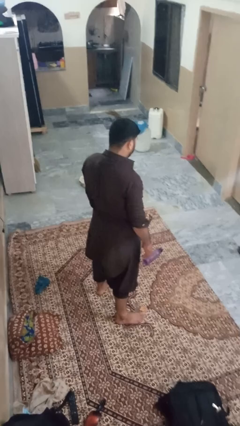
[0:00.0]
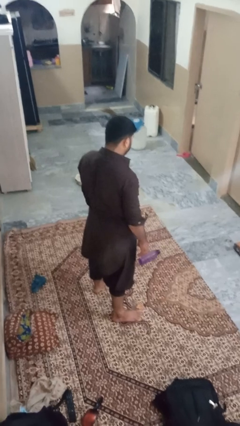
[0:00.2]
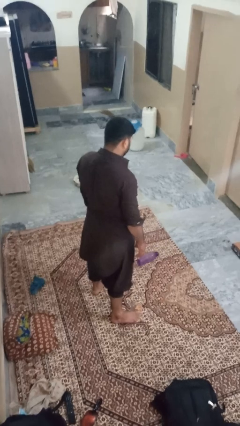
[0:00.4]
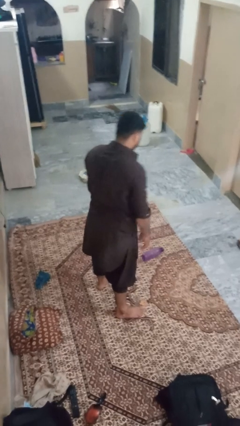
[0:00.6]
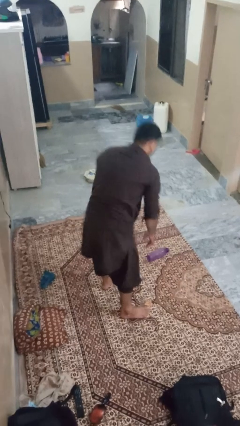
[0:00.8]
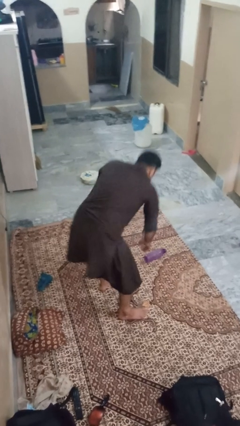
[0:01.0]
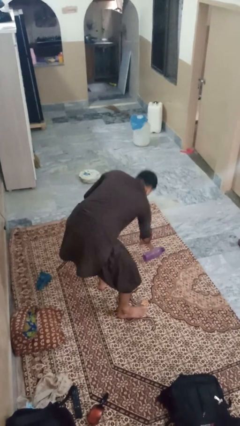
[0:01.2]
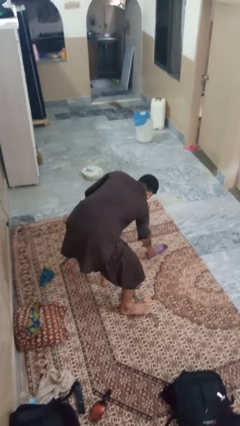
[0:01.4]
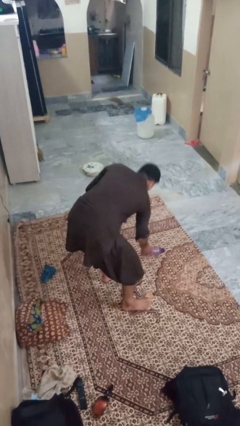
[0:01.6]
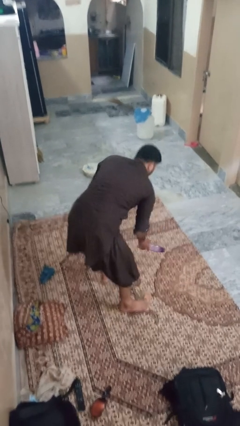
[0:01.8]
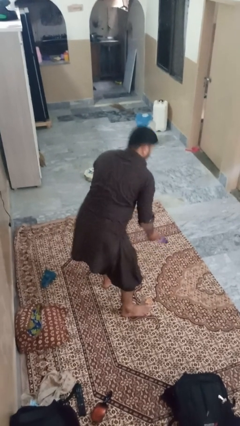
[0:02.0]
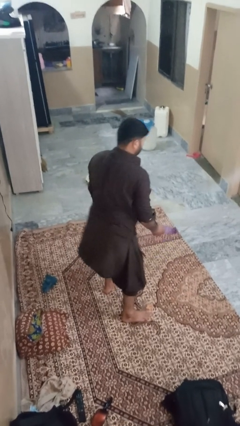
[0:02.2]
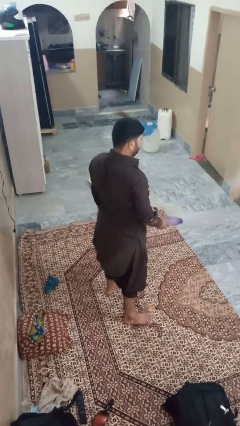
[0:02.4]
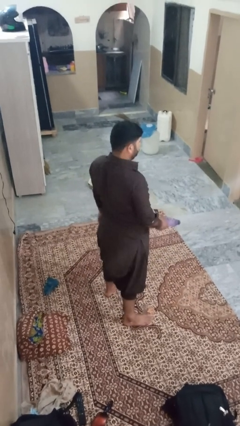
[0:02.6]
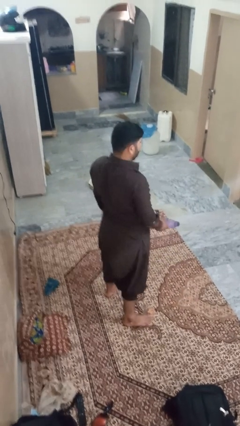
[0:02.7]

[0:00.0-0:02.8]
person picks up object from floor

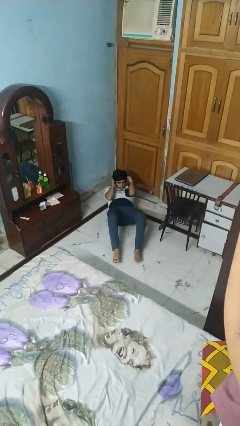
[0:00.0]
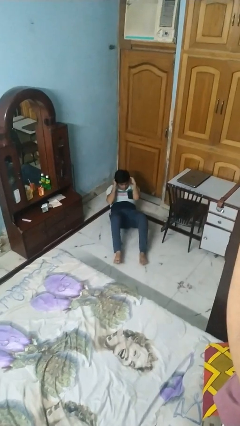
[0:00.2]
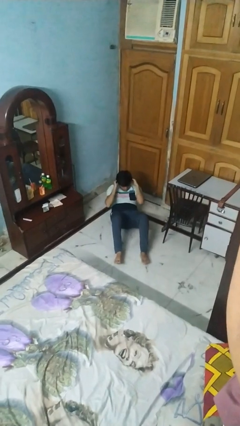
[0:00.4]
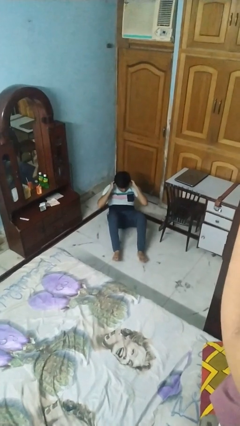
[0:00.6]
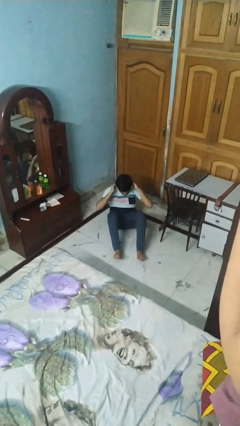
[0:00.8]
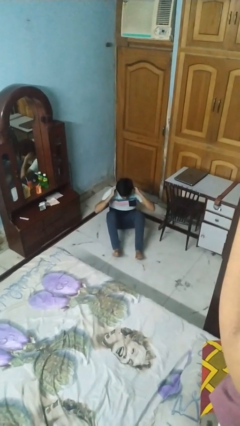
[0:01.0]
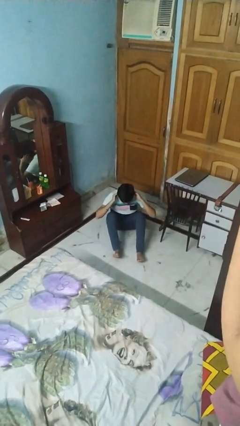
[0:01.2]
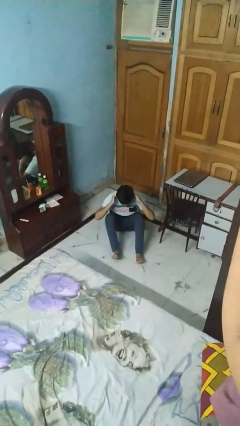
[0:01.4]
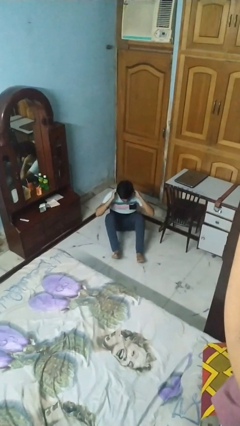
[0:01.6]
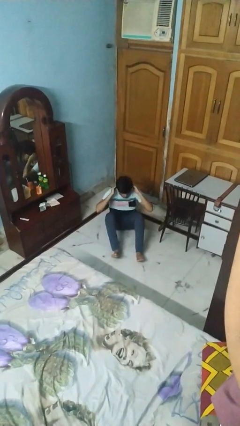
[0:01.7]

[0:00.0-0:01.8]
person exercises with situp

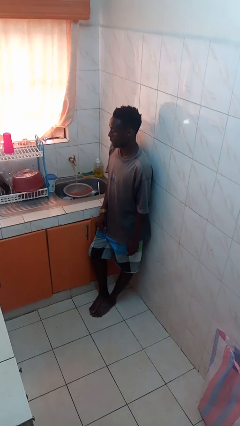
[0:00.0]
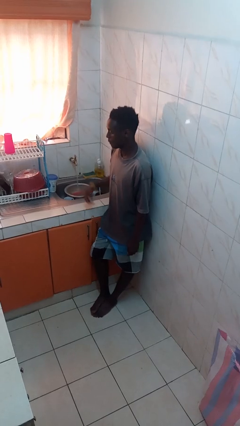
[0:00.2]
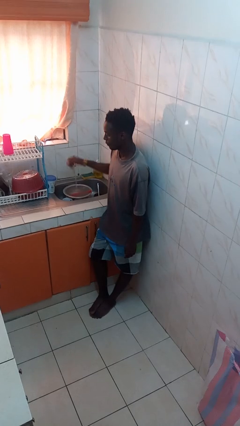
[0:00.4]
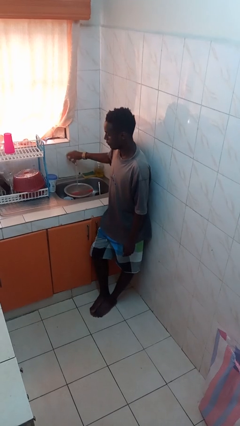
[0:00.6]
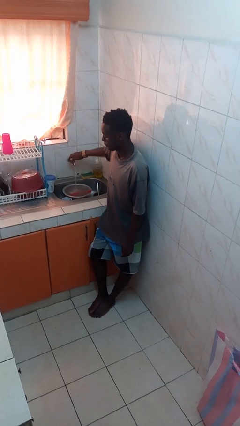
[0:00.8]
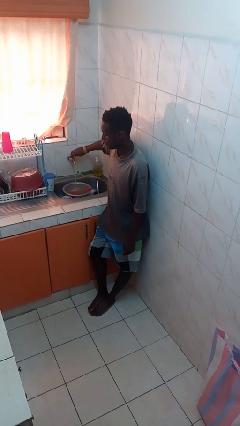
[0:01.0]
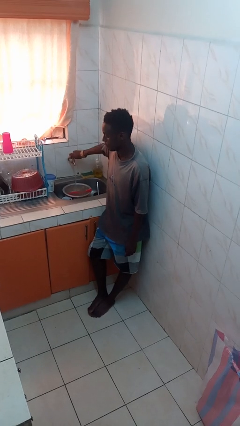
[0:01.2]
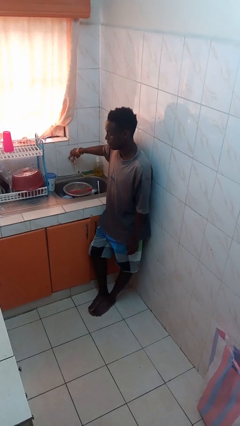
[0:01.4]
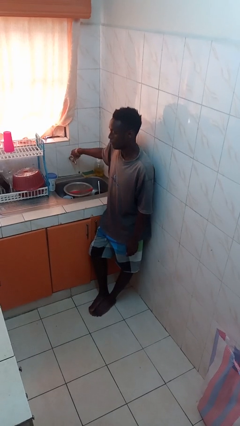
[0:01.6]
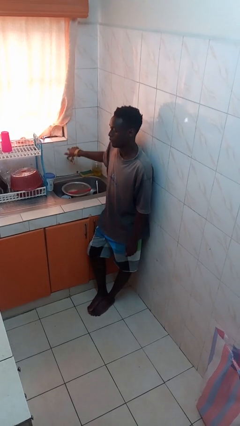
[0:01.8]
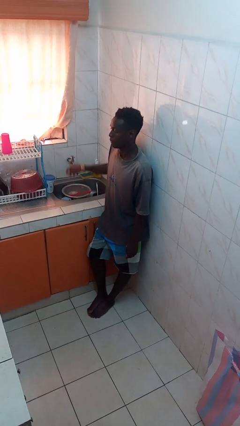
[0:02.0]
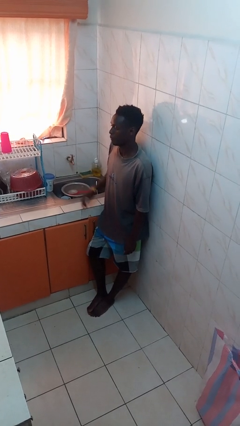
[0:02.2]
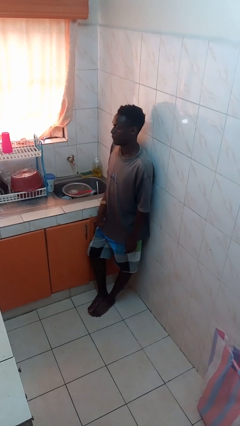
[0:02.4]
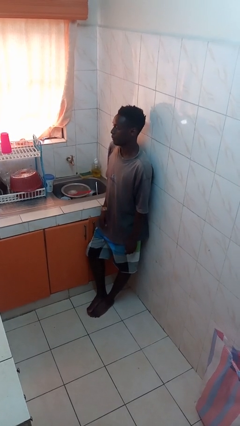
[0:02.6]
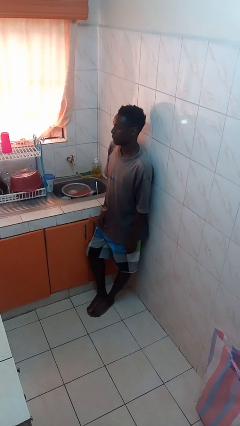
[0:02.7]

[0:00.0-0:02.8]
person turns off faucet

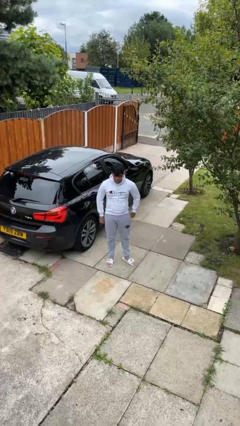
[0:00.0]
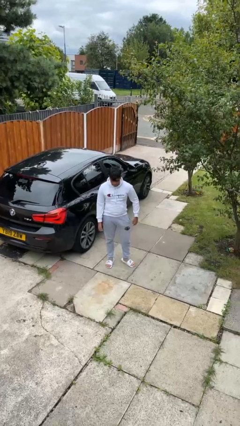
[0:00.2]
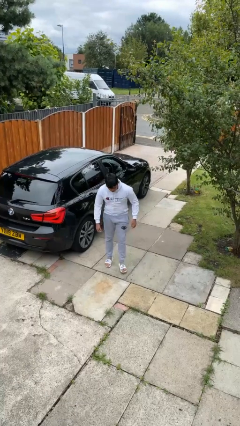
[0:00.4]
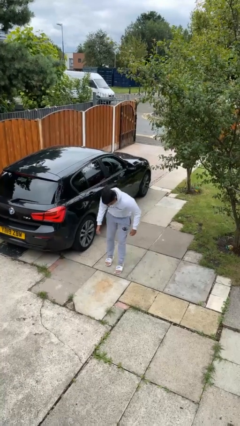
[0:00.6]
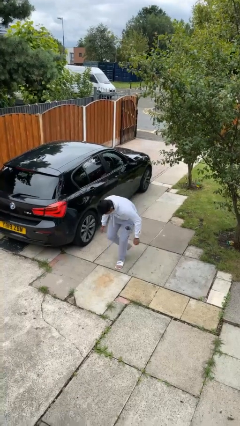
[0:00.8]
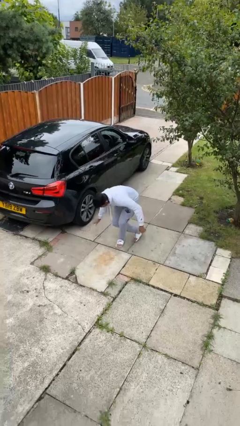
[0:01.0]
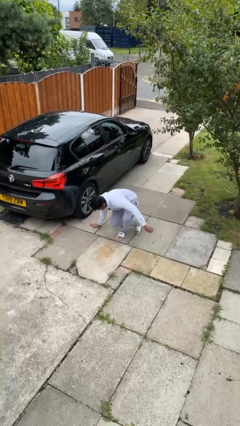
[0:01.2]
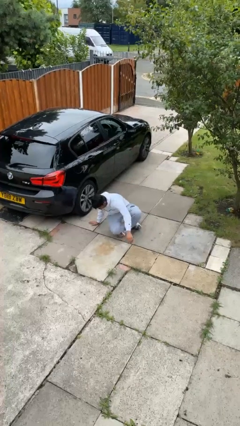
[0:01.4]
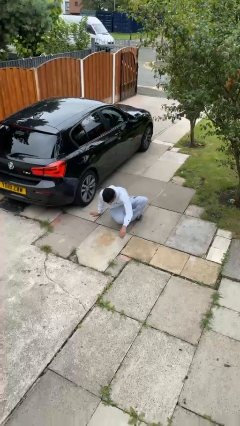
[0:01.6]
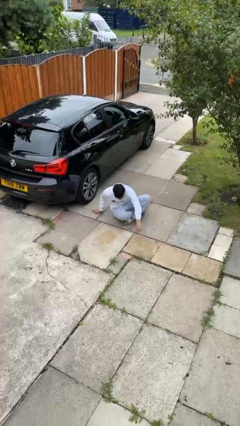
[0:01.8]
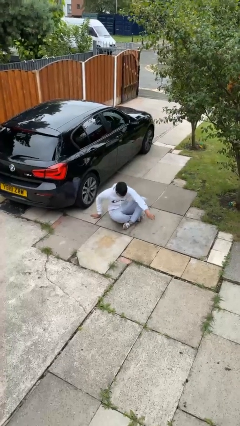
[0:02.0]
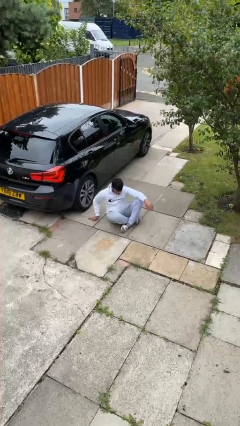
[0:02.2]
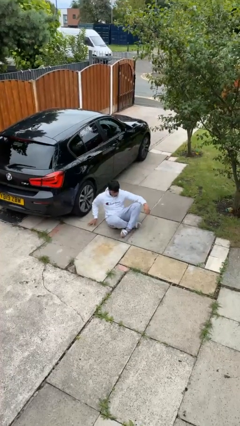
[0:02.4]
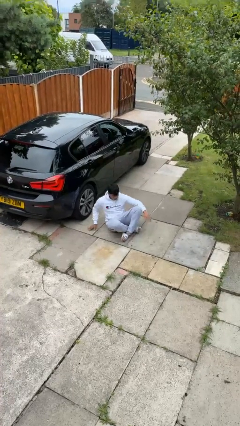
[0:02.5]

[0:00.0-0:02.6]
person sits crisscross

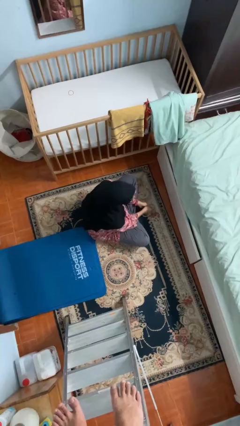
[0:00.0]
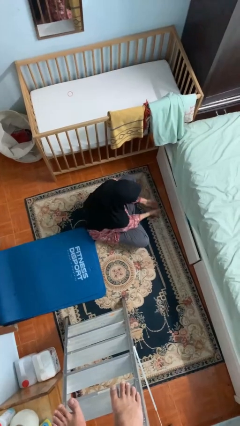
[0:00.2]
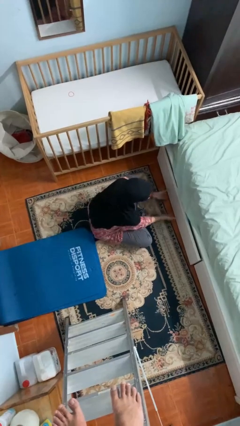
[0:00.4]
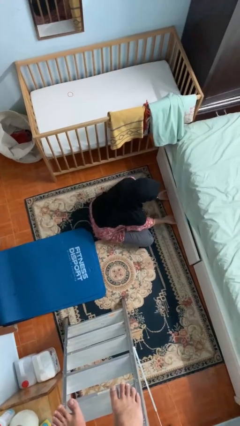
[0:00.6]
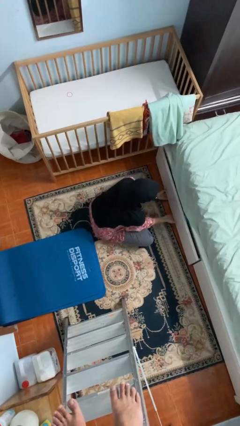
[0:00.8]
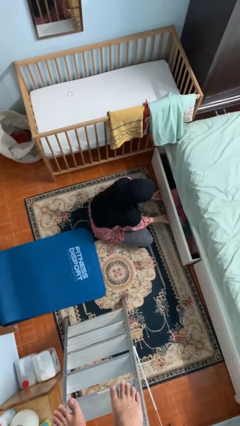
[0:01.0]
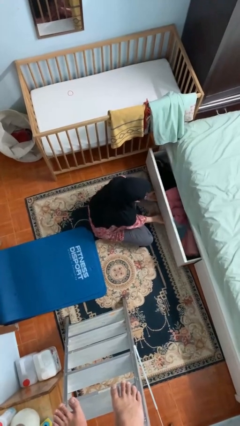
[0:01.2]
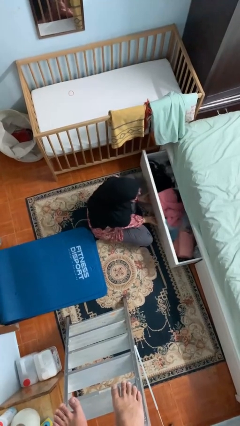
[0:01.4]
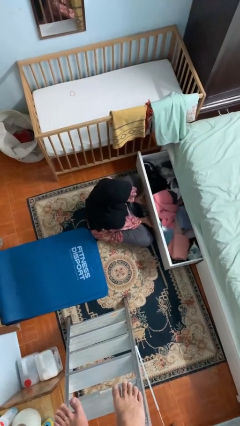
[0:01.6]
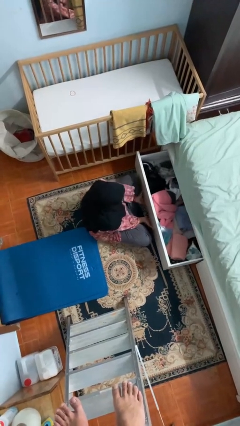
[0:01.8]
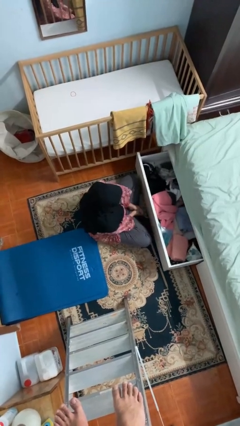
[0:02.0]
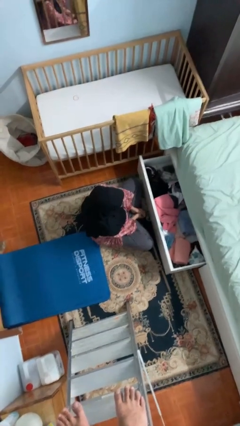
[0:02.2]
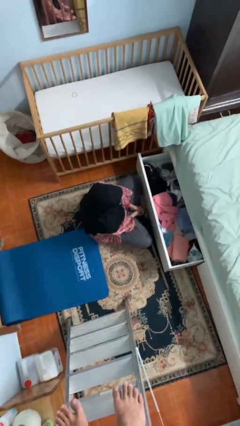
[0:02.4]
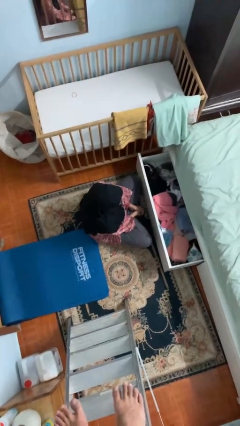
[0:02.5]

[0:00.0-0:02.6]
person opens dresser drawer

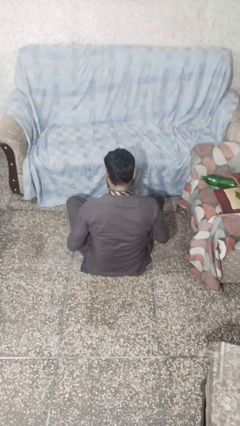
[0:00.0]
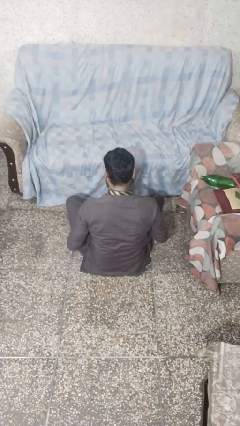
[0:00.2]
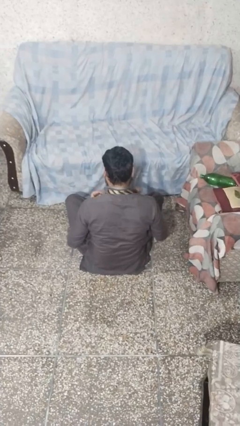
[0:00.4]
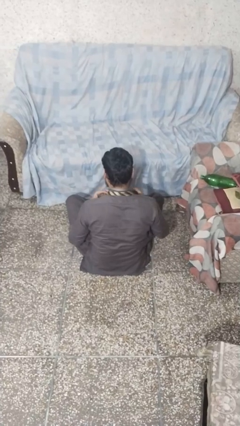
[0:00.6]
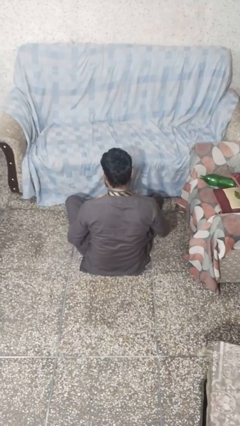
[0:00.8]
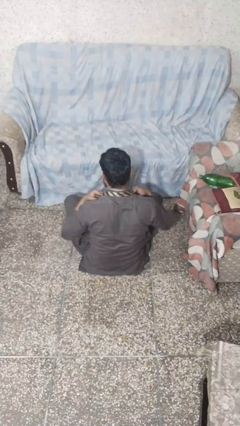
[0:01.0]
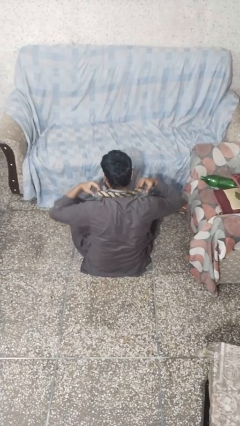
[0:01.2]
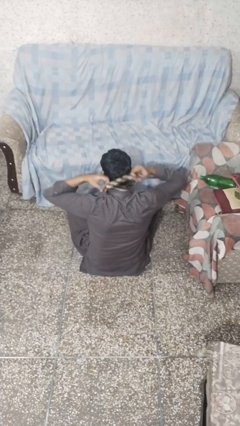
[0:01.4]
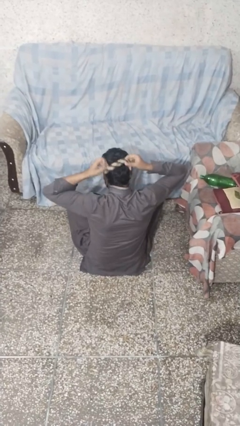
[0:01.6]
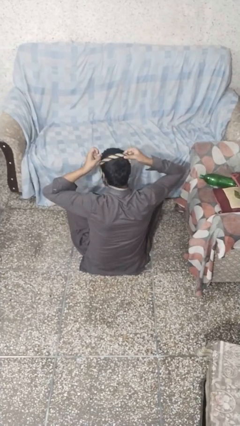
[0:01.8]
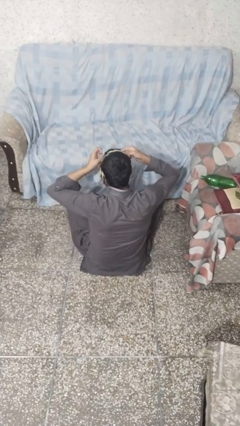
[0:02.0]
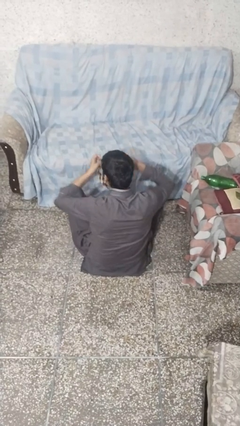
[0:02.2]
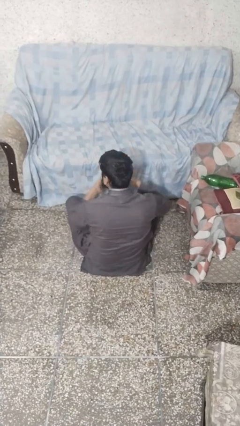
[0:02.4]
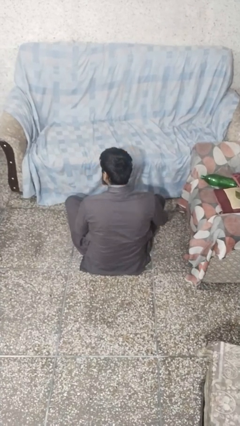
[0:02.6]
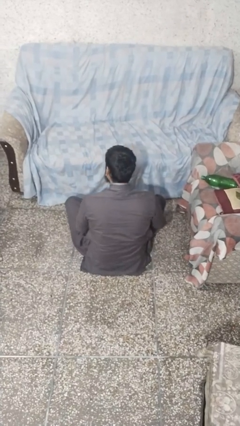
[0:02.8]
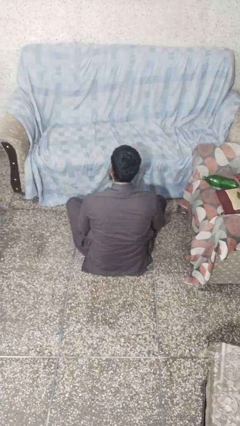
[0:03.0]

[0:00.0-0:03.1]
person takes off necktie

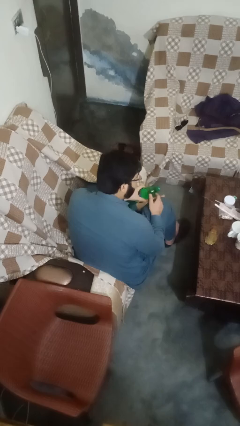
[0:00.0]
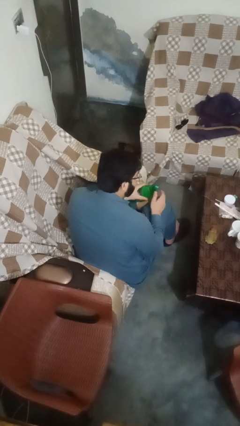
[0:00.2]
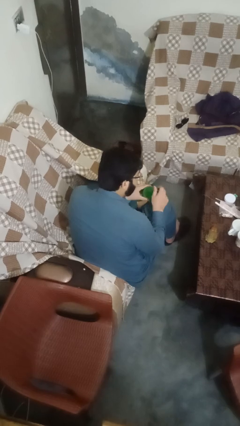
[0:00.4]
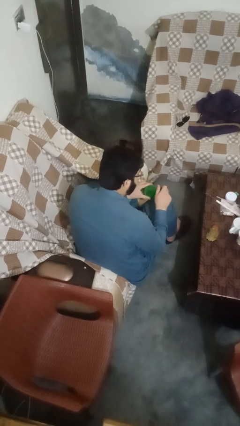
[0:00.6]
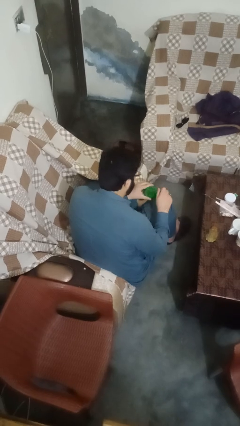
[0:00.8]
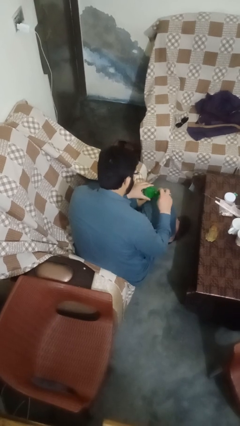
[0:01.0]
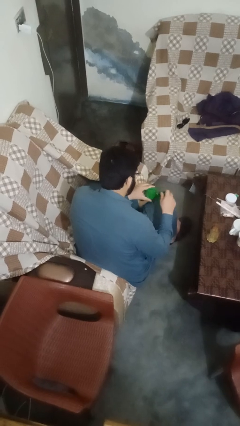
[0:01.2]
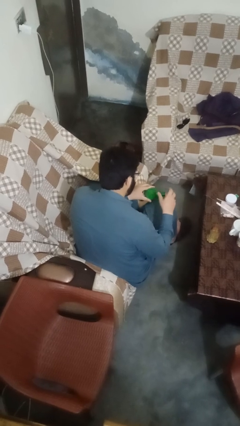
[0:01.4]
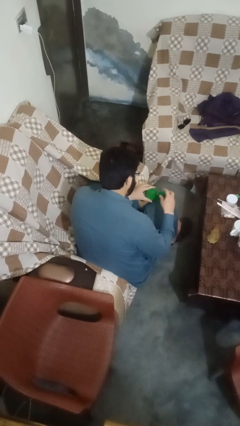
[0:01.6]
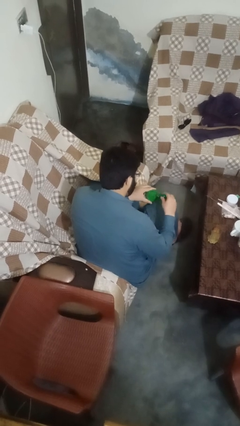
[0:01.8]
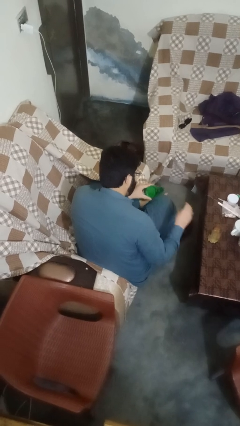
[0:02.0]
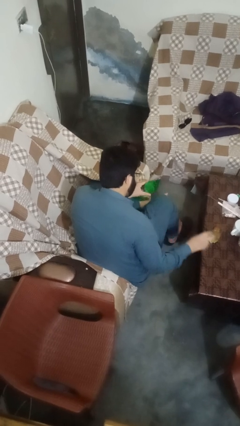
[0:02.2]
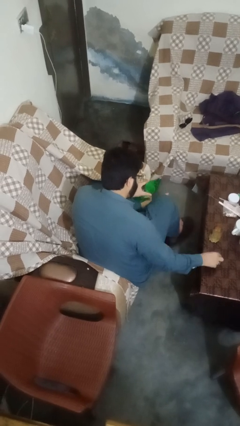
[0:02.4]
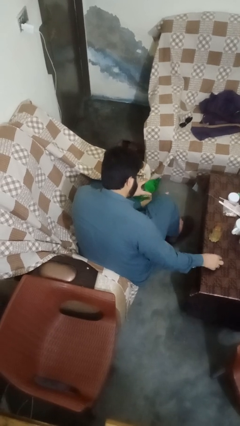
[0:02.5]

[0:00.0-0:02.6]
person unscrews lid from bottle
